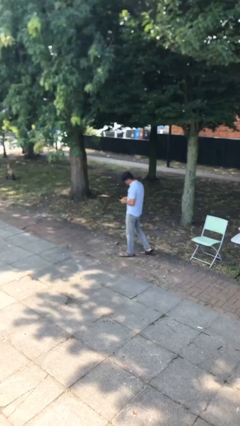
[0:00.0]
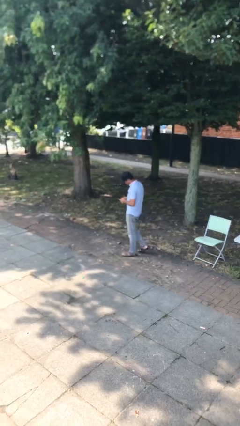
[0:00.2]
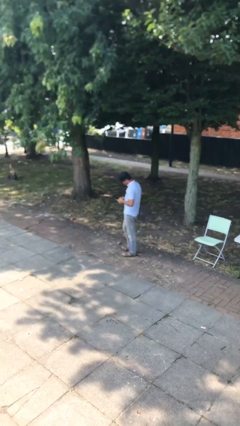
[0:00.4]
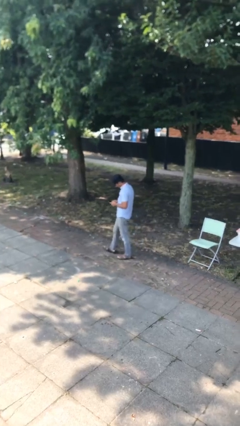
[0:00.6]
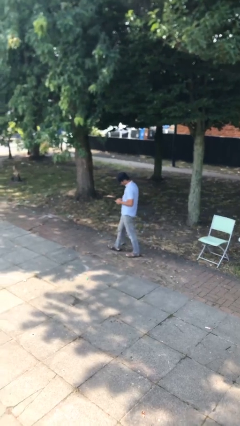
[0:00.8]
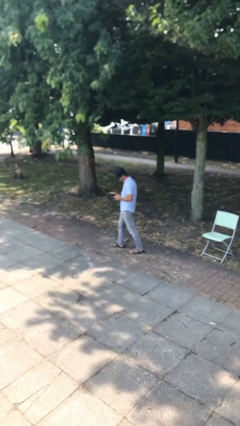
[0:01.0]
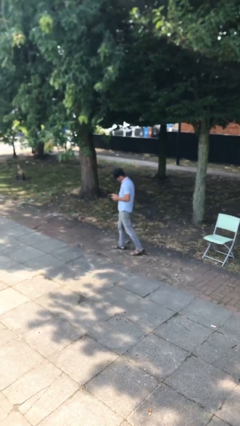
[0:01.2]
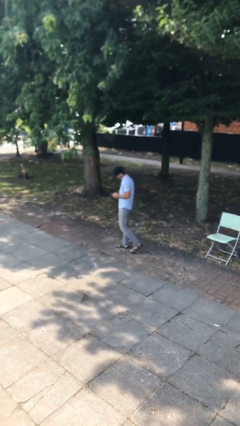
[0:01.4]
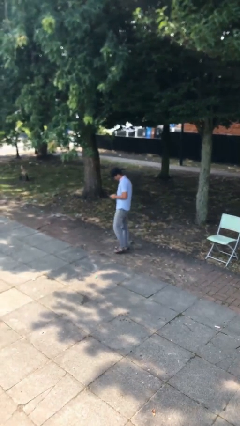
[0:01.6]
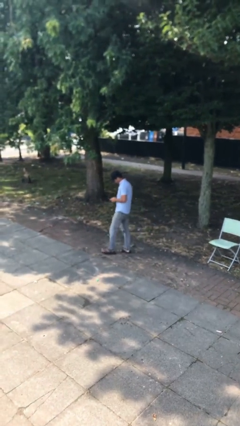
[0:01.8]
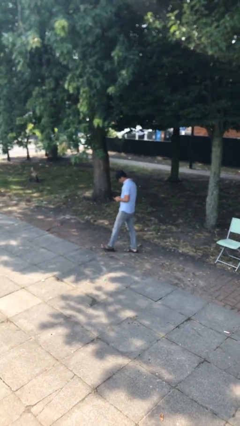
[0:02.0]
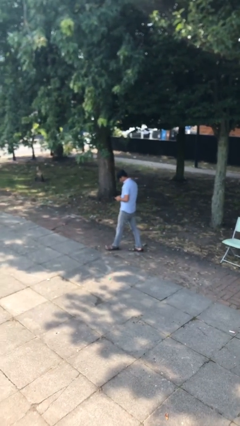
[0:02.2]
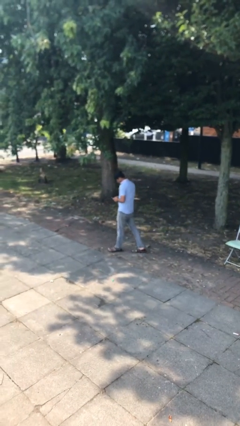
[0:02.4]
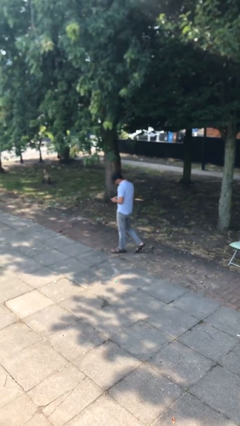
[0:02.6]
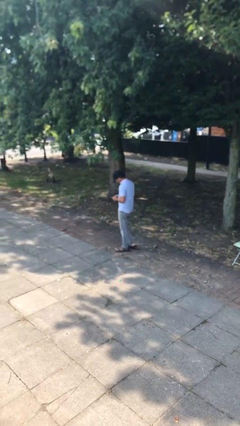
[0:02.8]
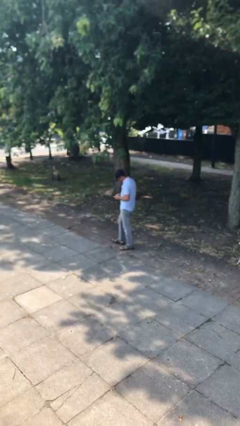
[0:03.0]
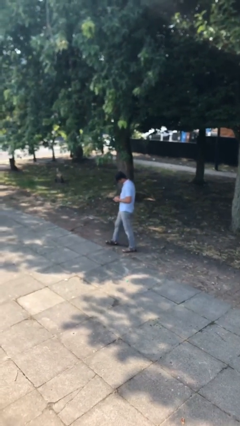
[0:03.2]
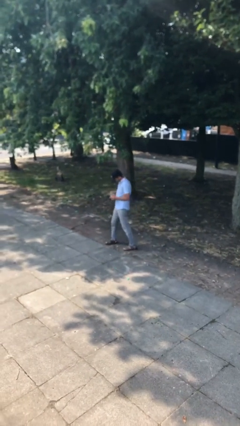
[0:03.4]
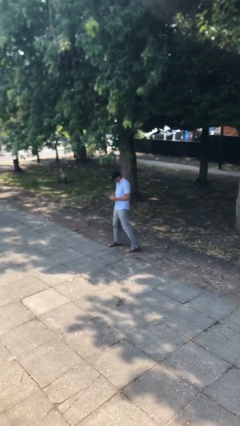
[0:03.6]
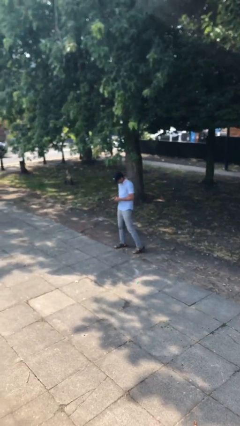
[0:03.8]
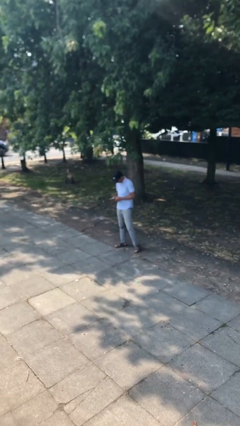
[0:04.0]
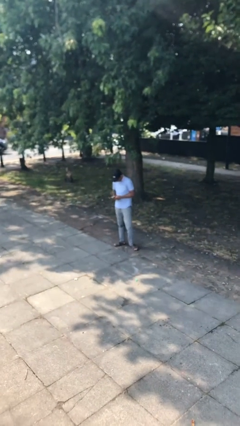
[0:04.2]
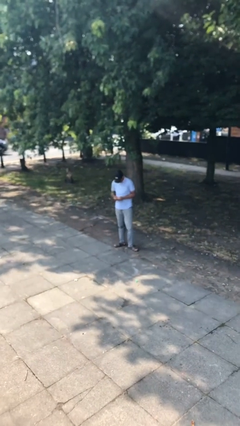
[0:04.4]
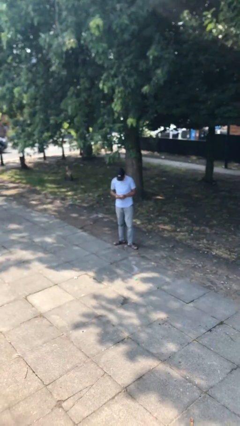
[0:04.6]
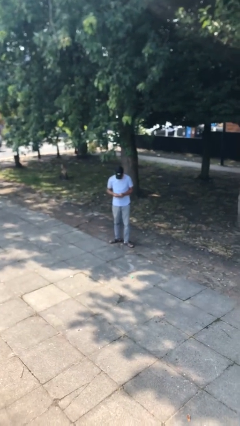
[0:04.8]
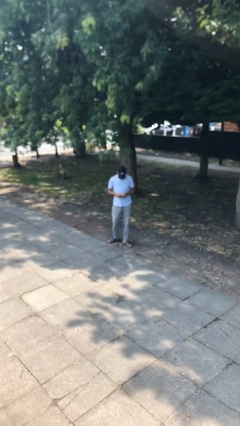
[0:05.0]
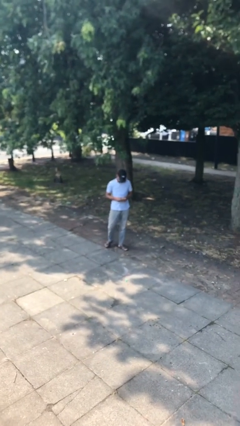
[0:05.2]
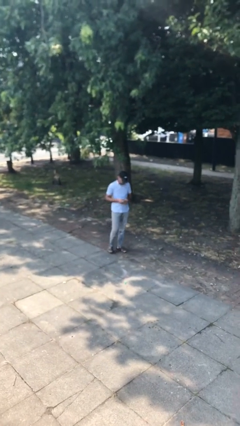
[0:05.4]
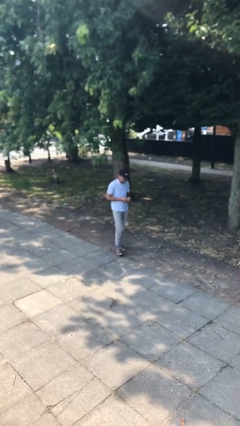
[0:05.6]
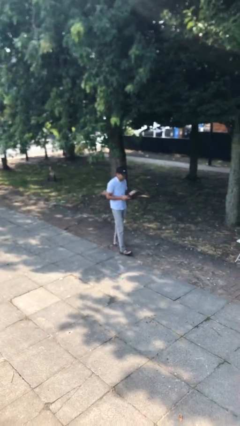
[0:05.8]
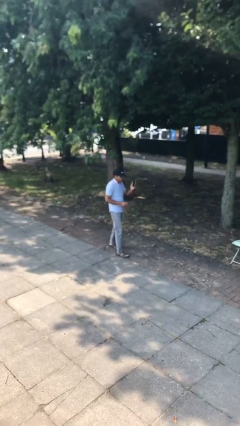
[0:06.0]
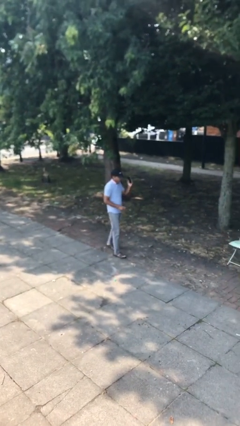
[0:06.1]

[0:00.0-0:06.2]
person texts on phone

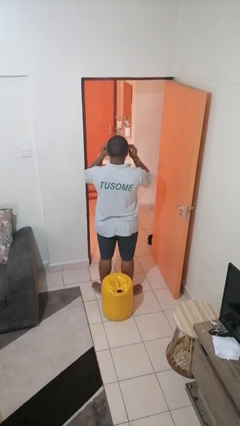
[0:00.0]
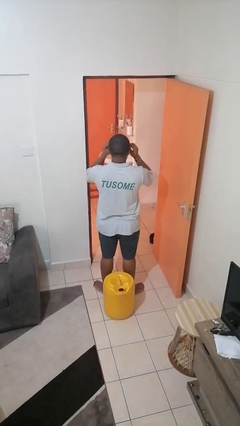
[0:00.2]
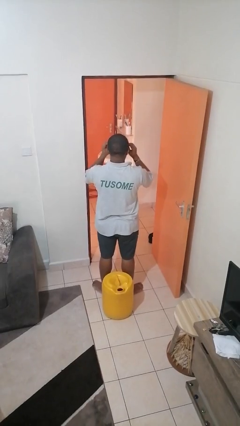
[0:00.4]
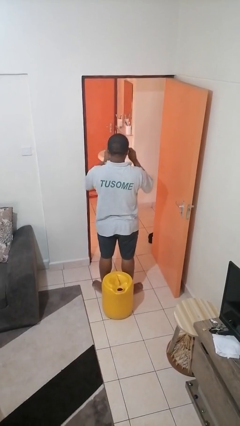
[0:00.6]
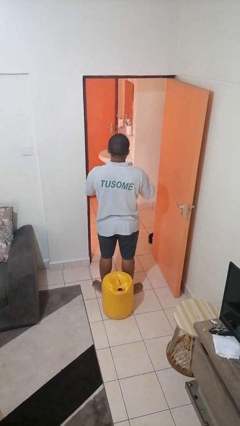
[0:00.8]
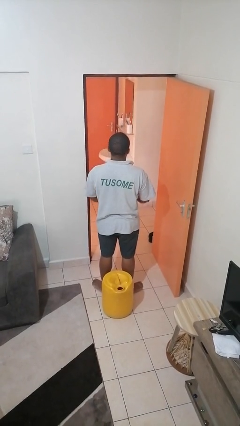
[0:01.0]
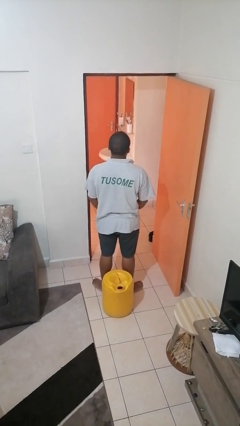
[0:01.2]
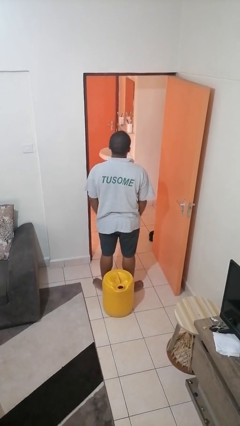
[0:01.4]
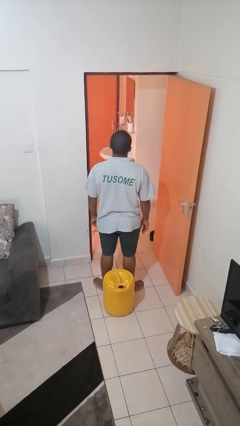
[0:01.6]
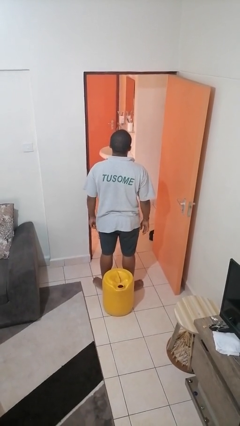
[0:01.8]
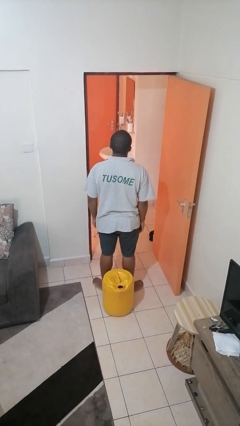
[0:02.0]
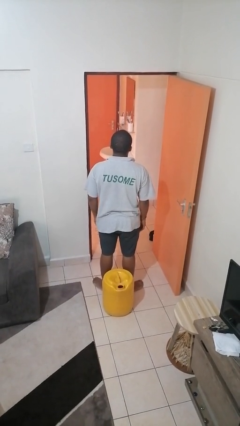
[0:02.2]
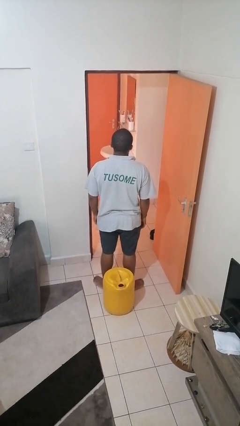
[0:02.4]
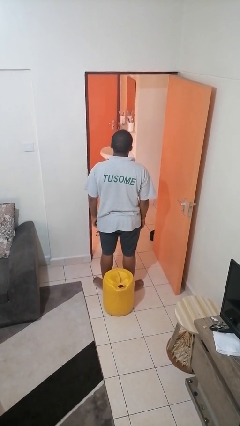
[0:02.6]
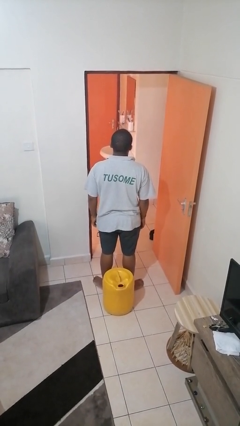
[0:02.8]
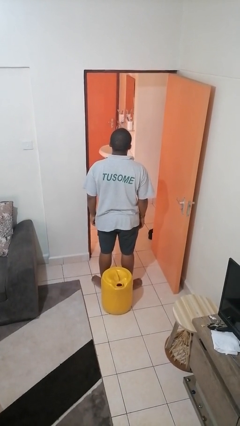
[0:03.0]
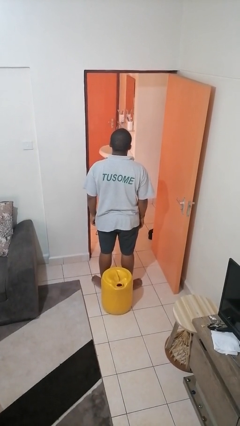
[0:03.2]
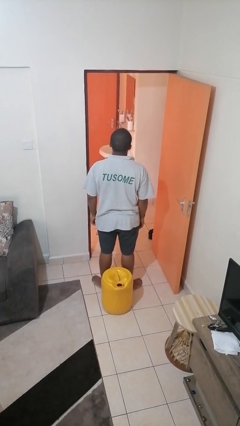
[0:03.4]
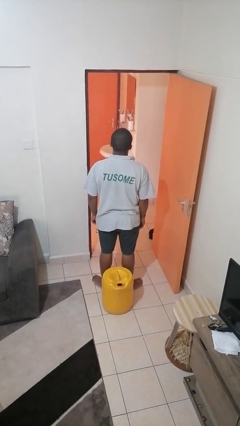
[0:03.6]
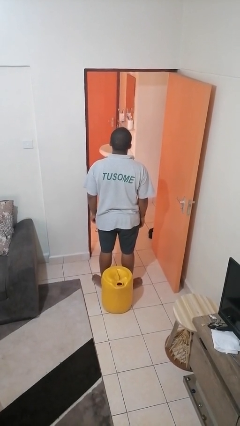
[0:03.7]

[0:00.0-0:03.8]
person takes off glasses

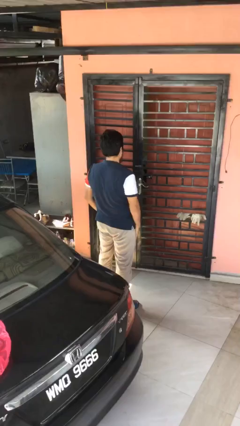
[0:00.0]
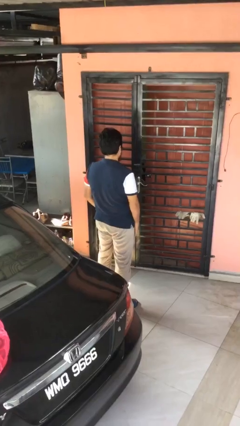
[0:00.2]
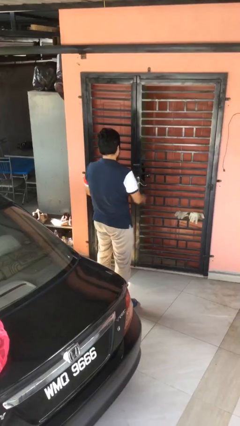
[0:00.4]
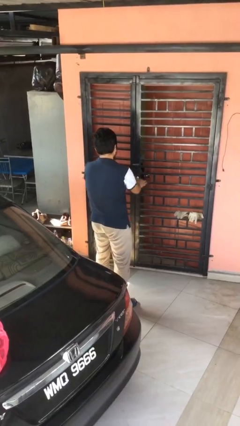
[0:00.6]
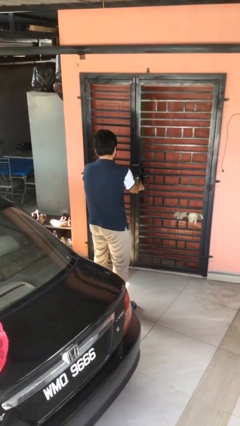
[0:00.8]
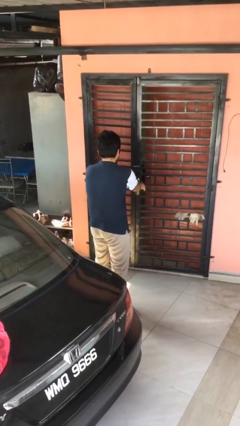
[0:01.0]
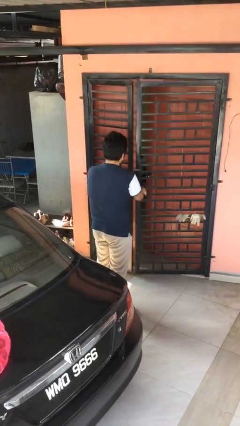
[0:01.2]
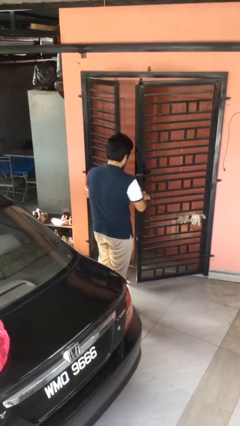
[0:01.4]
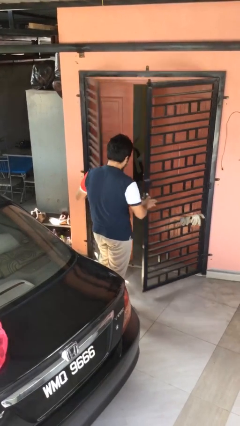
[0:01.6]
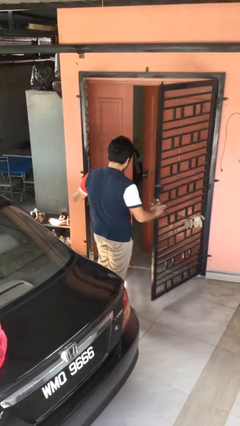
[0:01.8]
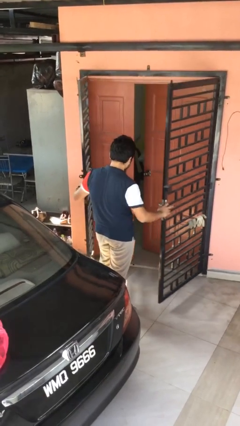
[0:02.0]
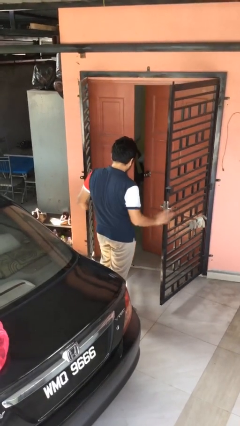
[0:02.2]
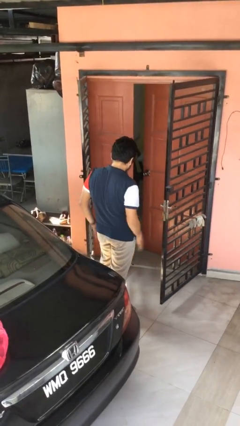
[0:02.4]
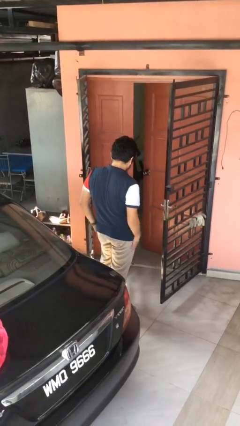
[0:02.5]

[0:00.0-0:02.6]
person opens gate

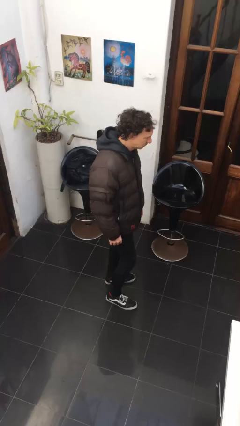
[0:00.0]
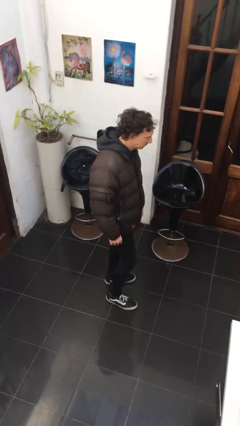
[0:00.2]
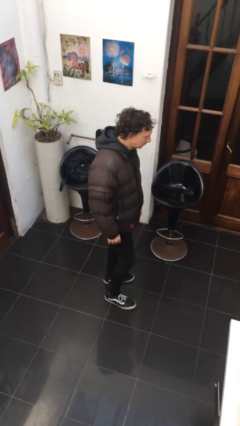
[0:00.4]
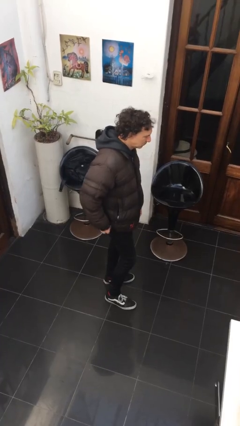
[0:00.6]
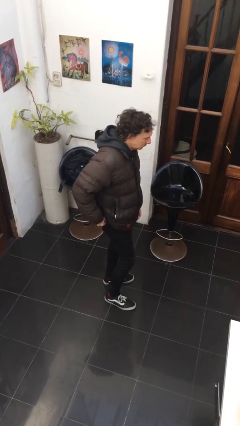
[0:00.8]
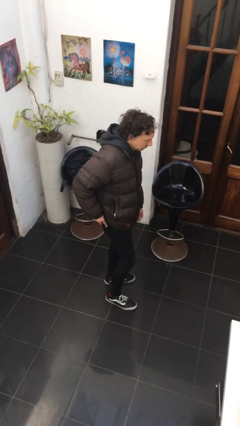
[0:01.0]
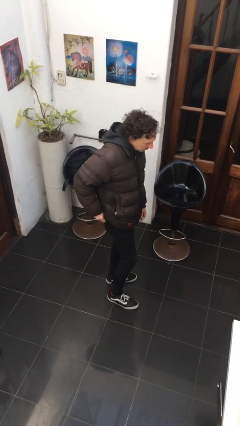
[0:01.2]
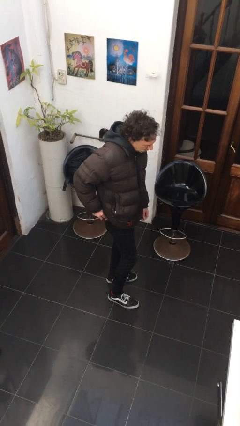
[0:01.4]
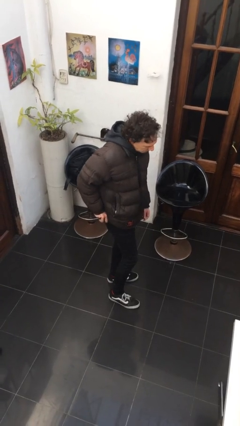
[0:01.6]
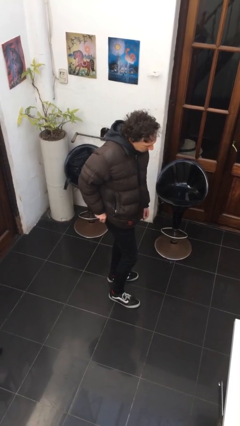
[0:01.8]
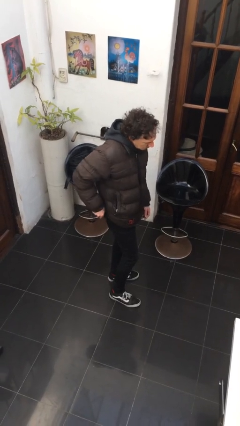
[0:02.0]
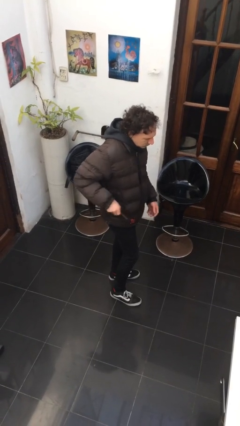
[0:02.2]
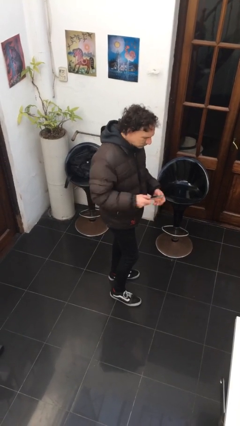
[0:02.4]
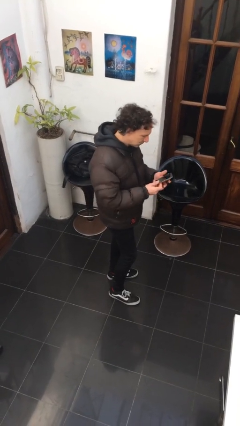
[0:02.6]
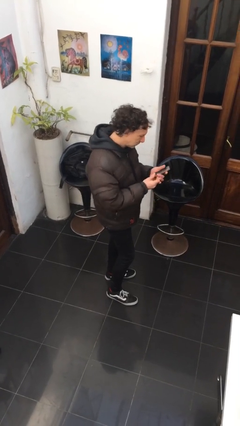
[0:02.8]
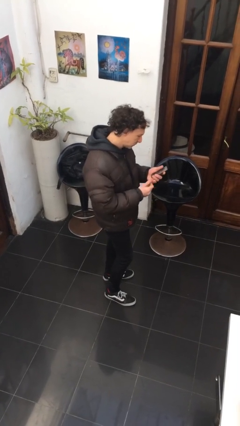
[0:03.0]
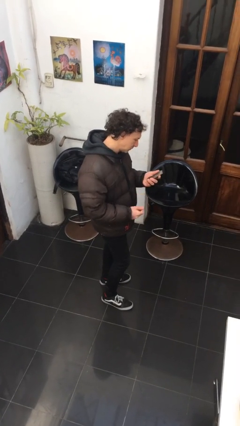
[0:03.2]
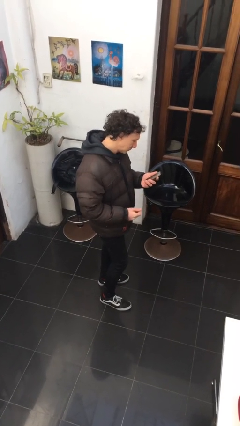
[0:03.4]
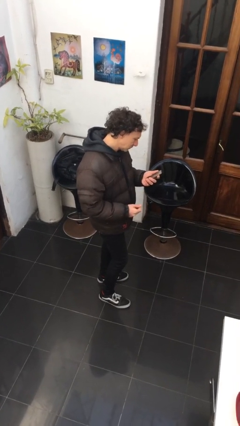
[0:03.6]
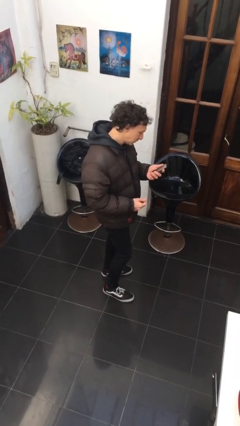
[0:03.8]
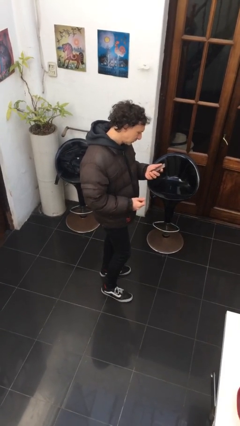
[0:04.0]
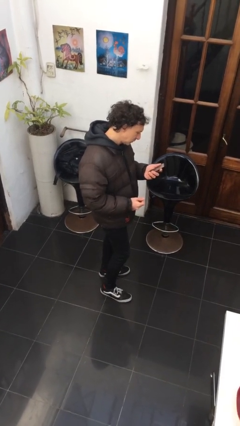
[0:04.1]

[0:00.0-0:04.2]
person takes phone from pocket

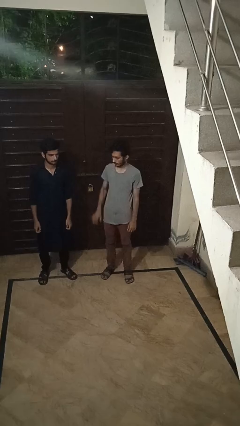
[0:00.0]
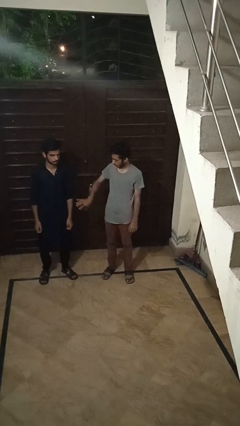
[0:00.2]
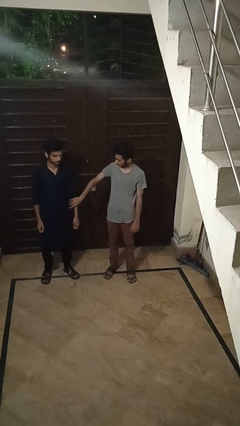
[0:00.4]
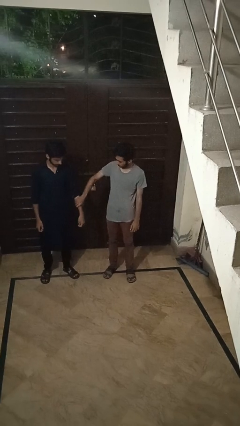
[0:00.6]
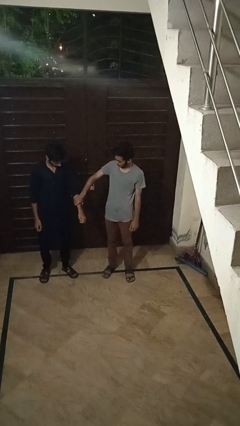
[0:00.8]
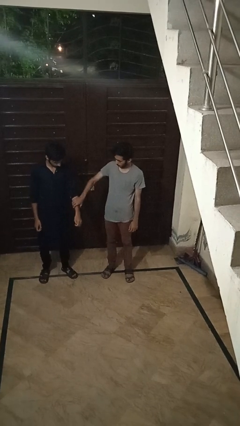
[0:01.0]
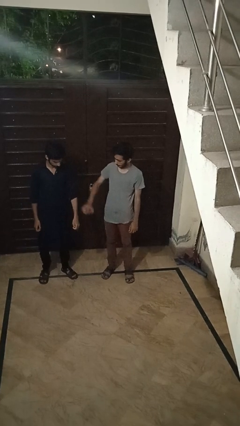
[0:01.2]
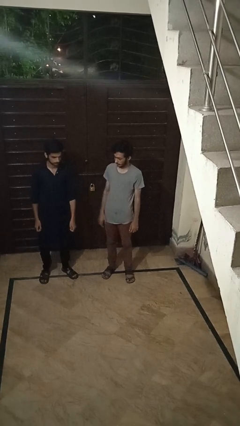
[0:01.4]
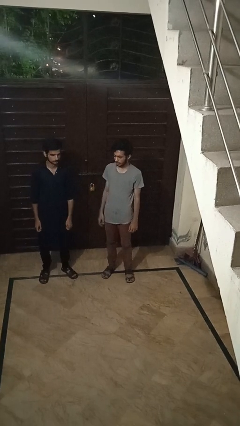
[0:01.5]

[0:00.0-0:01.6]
person grabs person by forearm
